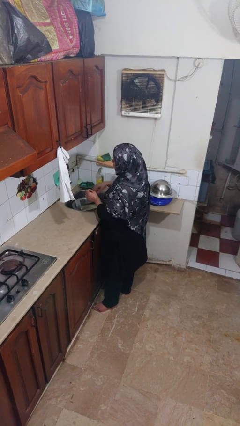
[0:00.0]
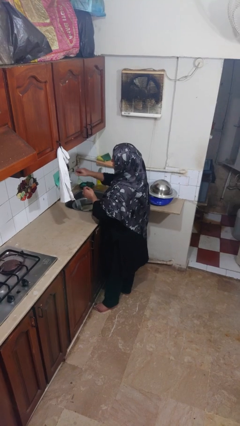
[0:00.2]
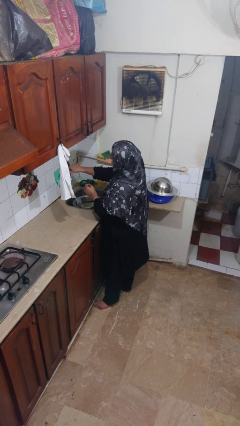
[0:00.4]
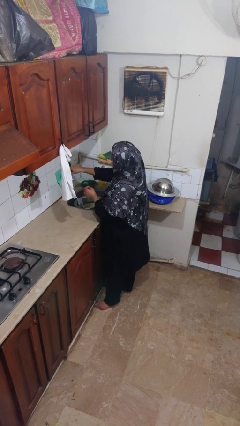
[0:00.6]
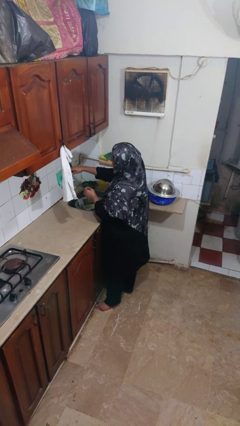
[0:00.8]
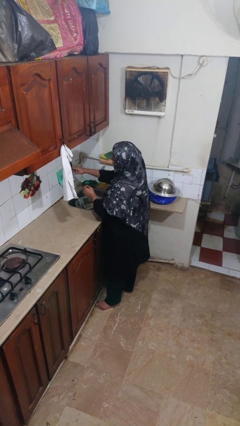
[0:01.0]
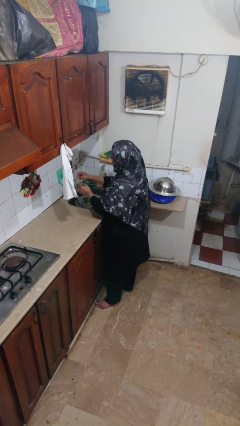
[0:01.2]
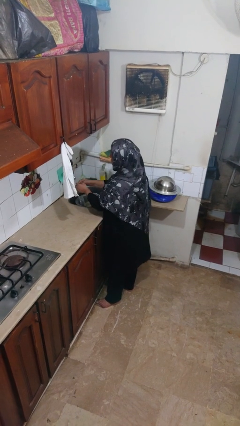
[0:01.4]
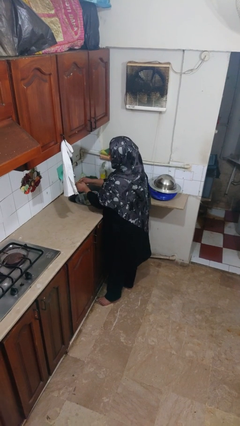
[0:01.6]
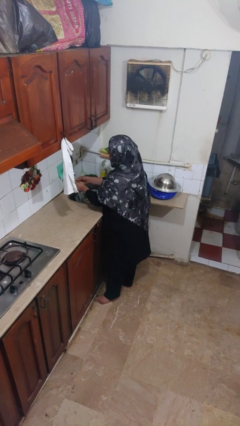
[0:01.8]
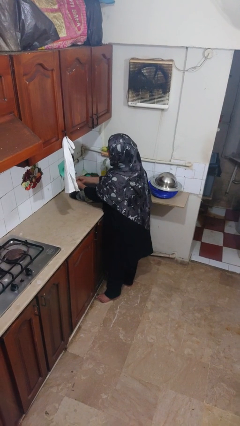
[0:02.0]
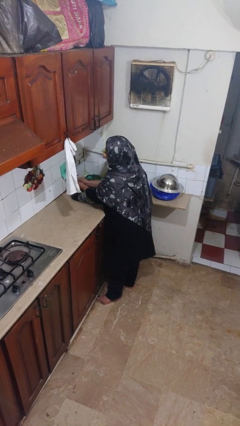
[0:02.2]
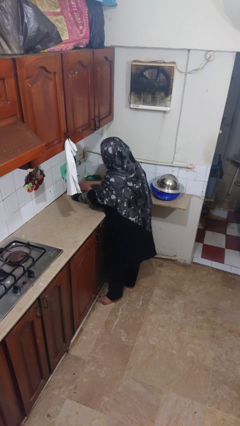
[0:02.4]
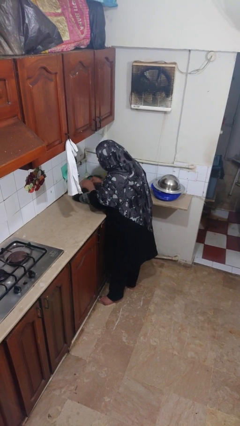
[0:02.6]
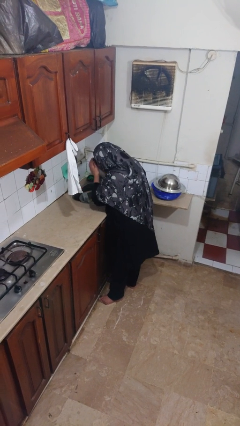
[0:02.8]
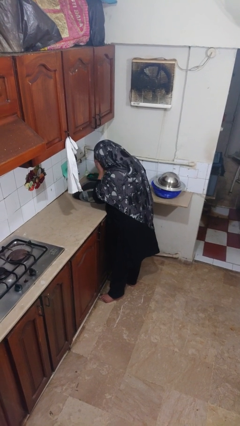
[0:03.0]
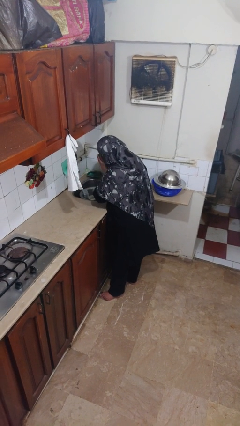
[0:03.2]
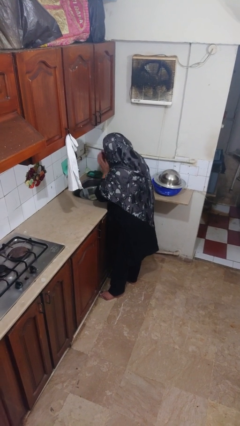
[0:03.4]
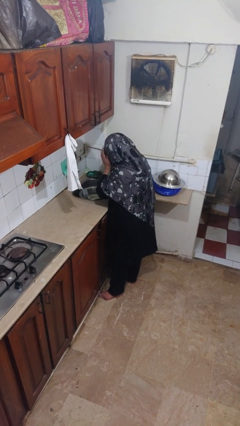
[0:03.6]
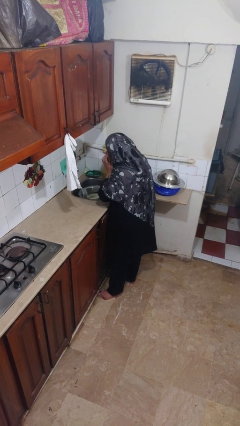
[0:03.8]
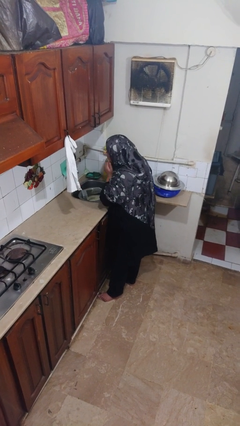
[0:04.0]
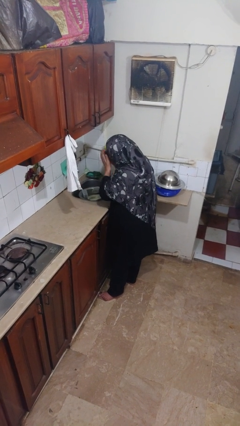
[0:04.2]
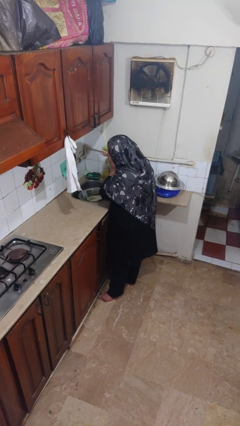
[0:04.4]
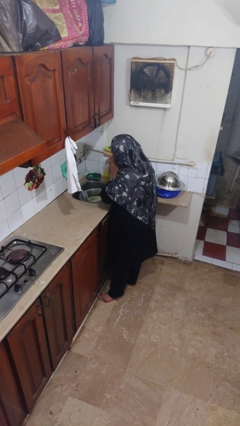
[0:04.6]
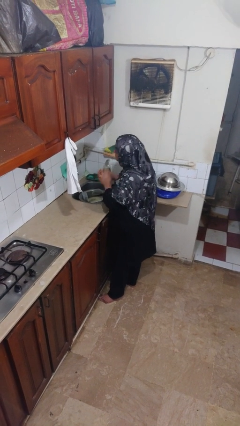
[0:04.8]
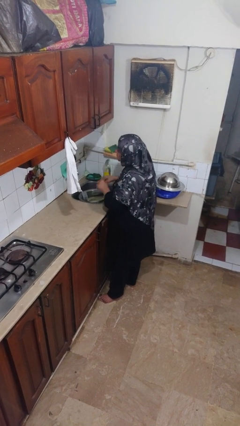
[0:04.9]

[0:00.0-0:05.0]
person washes face

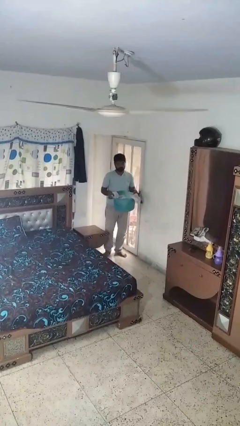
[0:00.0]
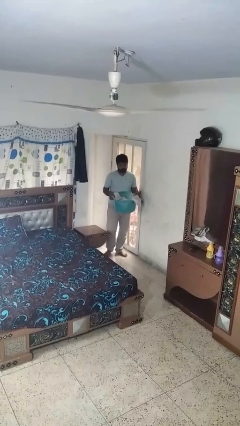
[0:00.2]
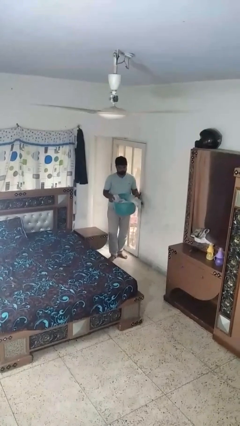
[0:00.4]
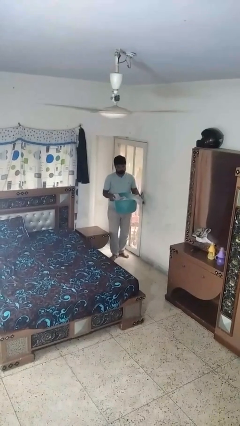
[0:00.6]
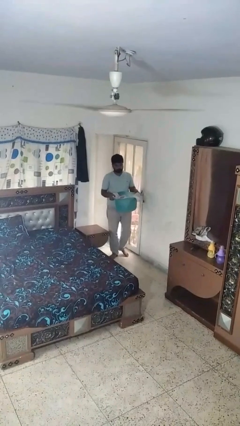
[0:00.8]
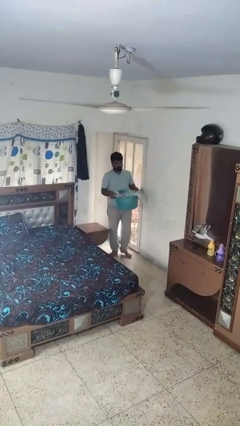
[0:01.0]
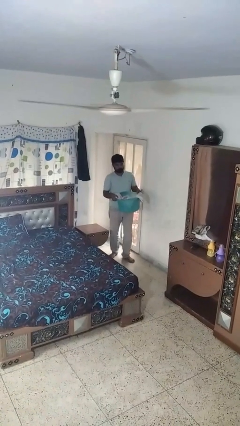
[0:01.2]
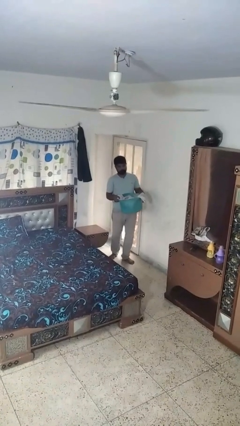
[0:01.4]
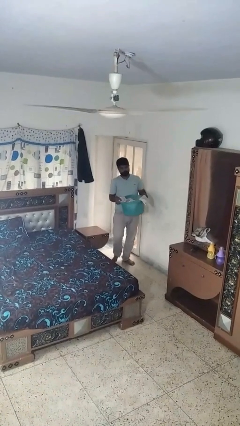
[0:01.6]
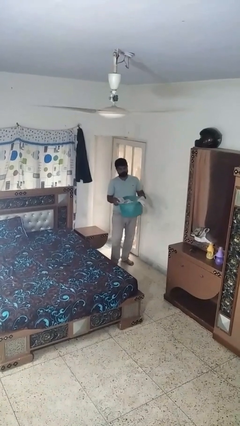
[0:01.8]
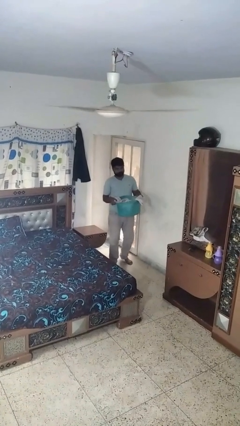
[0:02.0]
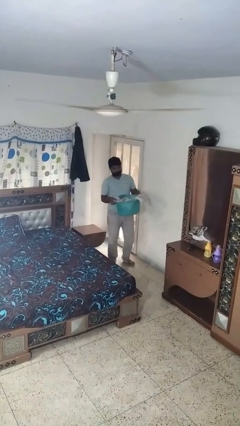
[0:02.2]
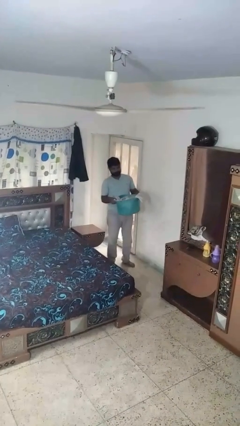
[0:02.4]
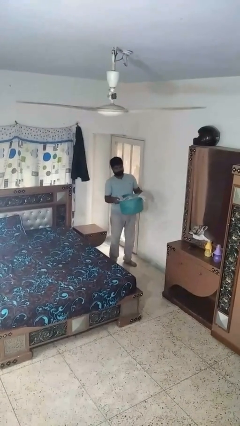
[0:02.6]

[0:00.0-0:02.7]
person carries laundry basket

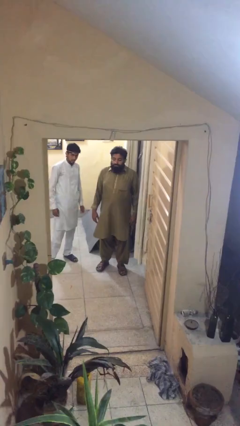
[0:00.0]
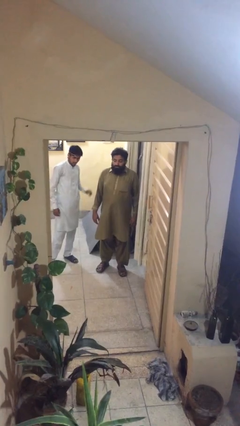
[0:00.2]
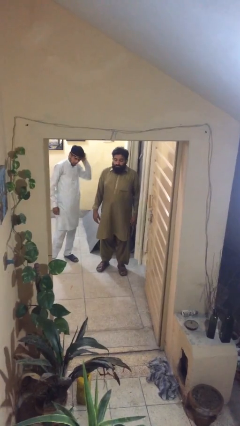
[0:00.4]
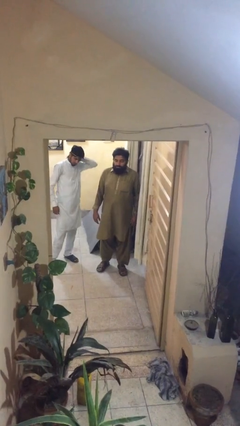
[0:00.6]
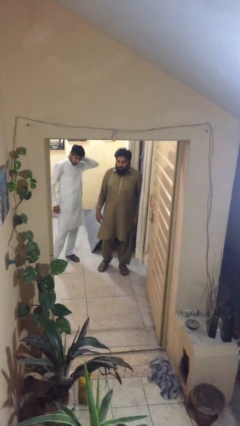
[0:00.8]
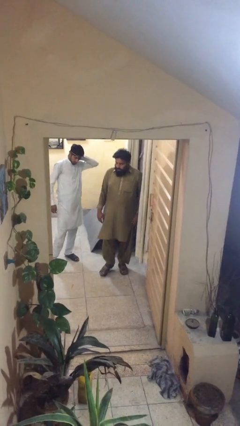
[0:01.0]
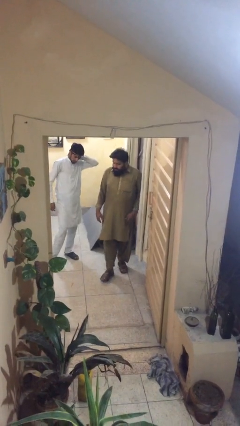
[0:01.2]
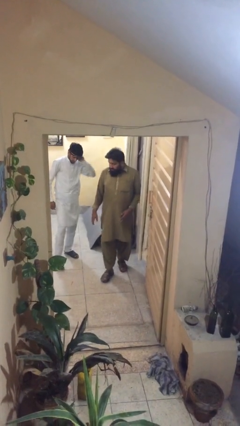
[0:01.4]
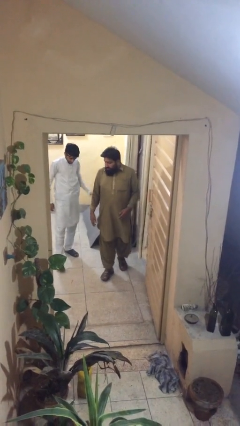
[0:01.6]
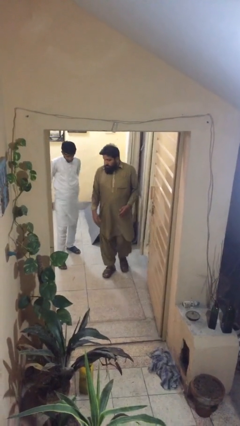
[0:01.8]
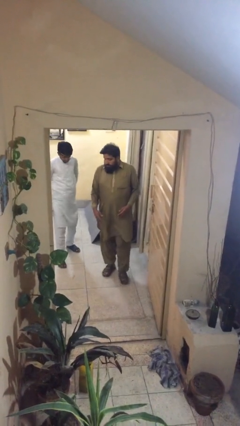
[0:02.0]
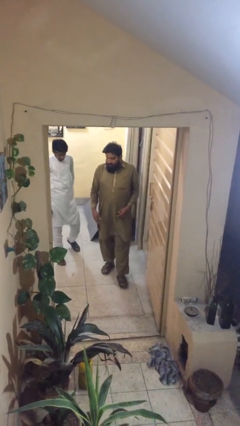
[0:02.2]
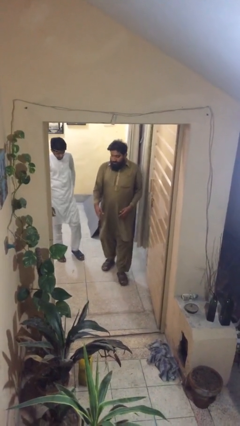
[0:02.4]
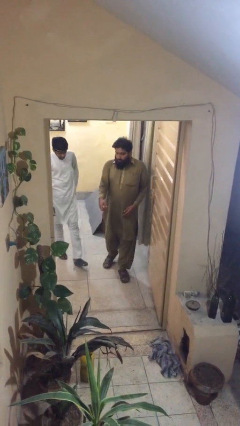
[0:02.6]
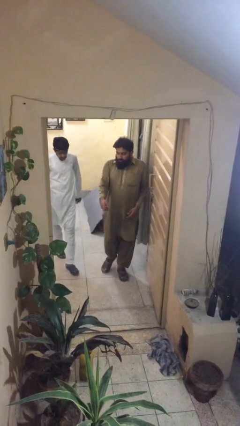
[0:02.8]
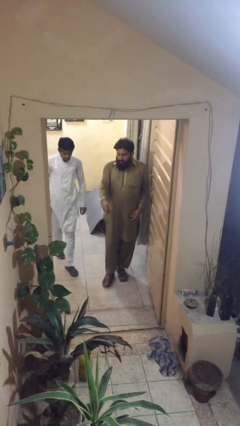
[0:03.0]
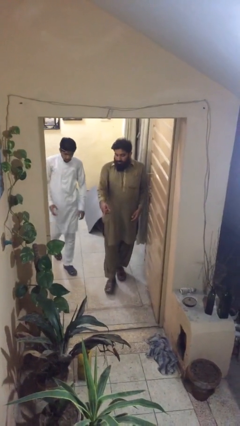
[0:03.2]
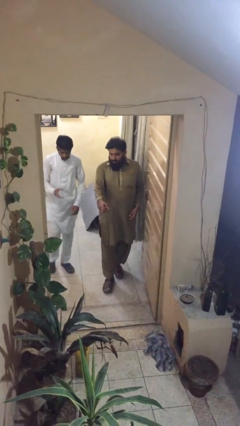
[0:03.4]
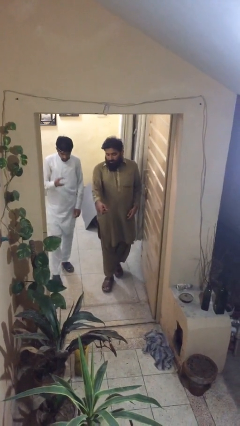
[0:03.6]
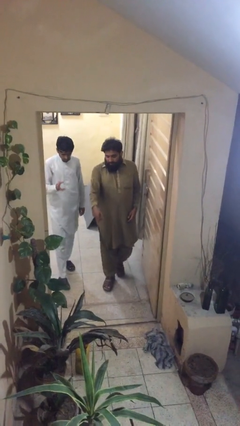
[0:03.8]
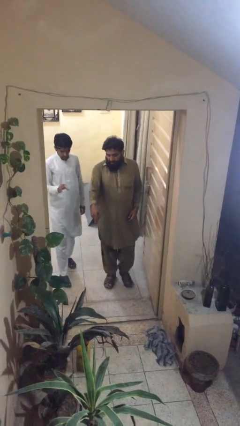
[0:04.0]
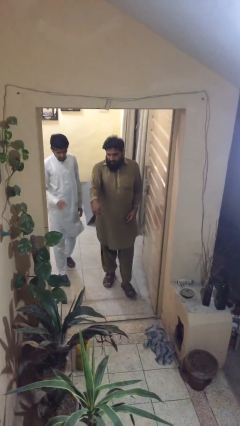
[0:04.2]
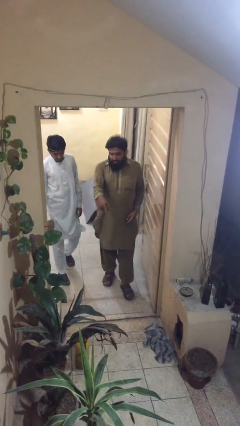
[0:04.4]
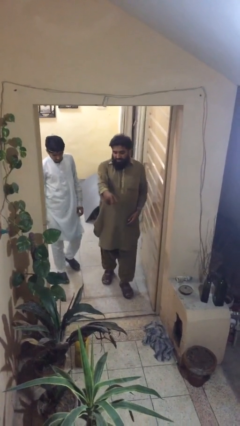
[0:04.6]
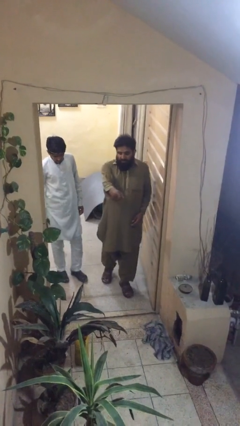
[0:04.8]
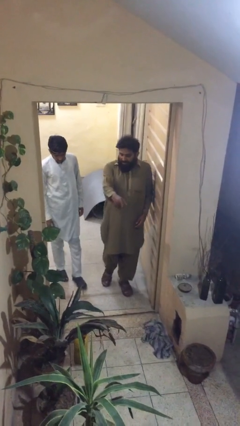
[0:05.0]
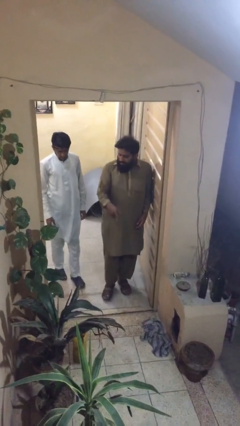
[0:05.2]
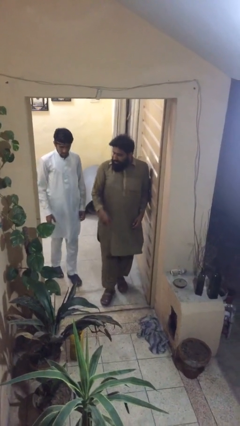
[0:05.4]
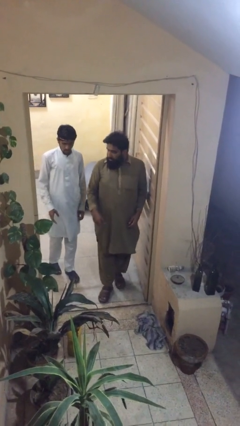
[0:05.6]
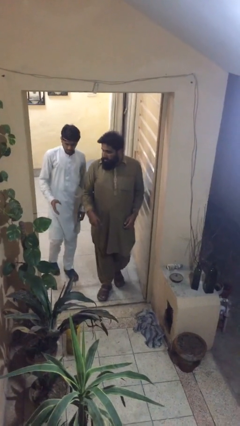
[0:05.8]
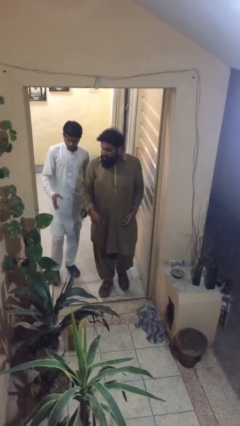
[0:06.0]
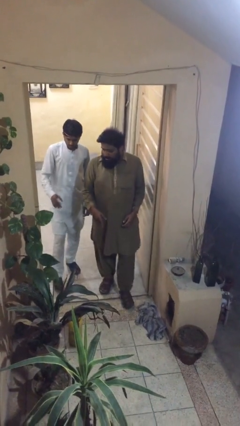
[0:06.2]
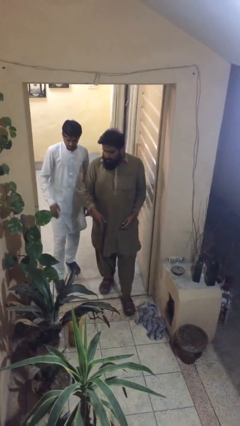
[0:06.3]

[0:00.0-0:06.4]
person talks to person

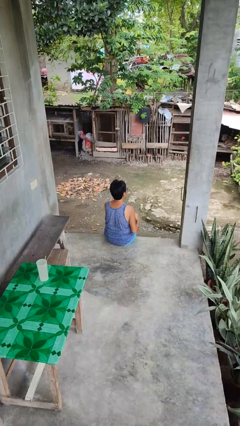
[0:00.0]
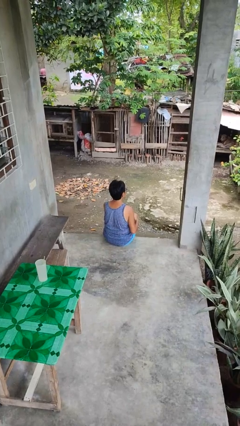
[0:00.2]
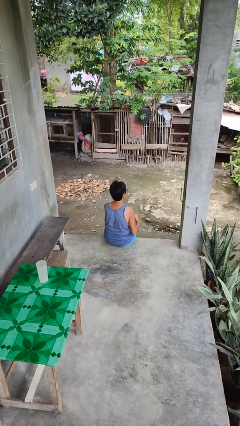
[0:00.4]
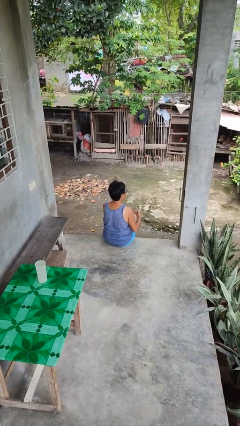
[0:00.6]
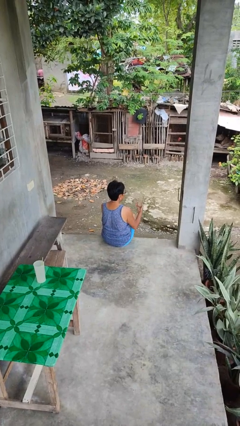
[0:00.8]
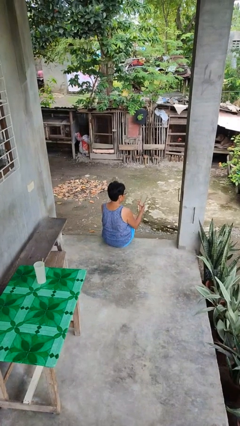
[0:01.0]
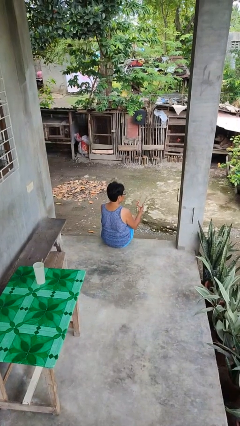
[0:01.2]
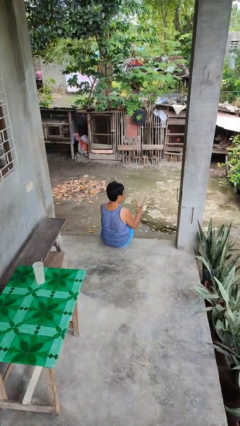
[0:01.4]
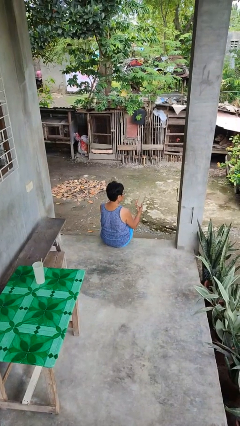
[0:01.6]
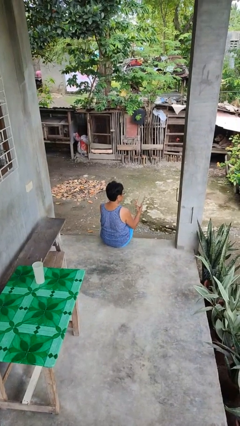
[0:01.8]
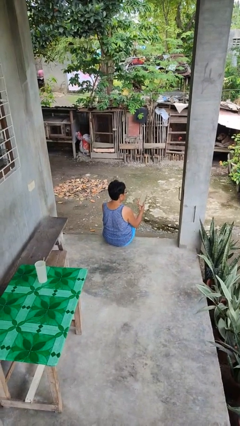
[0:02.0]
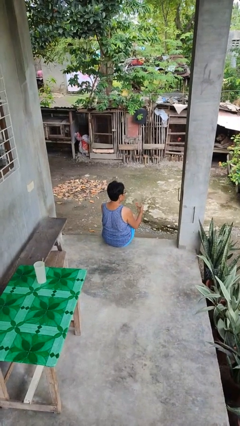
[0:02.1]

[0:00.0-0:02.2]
person takes phone from pocket

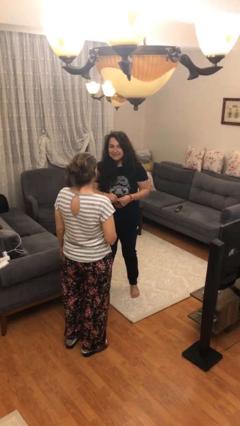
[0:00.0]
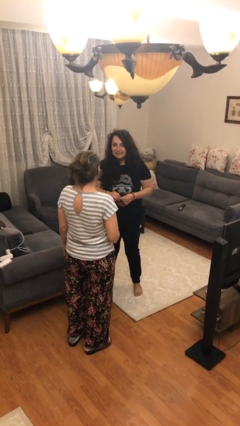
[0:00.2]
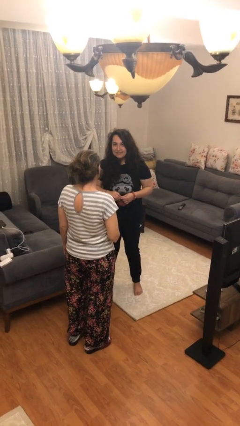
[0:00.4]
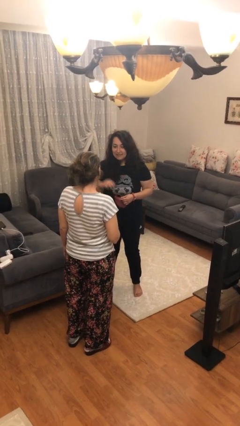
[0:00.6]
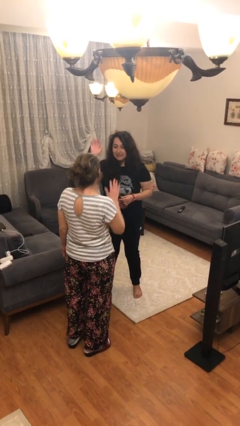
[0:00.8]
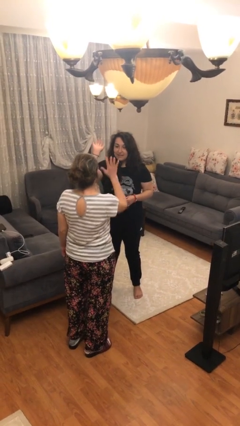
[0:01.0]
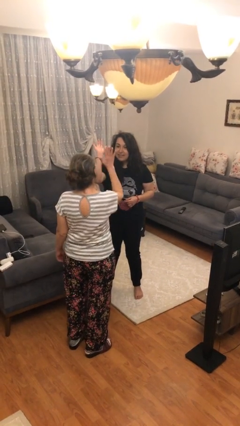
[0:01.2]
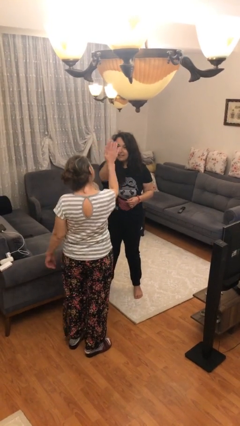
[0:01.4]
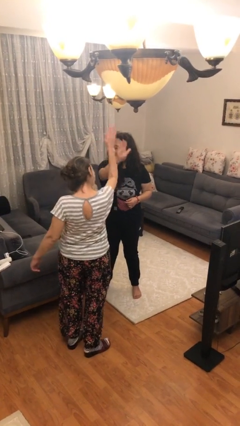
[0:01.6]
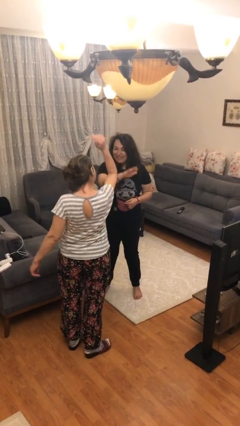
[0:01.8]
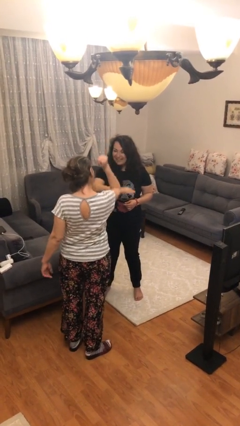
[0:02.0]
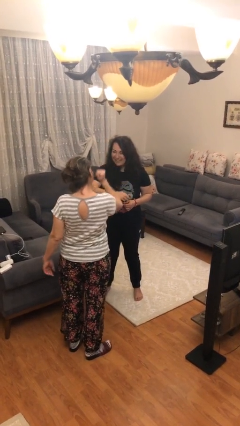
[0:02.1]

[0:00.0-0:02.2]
person highfives hand
